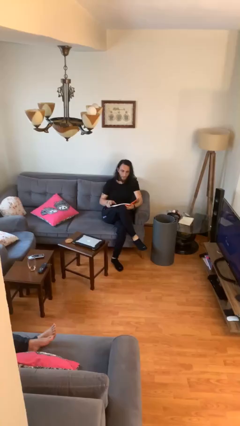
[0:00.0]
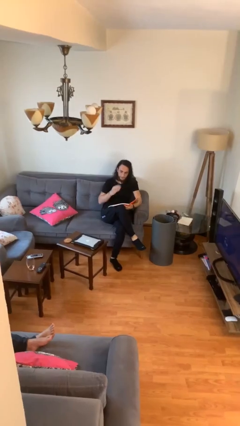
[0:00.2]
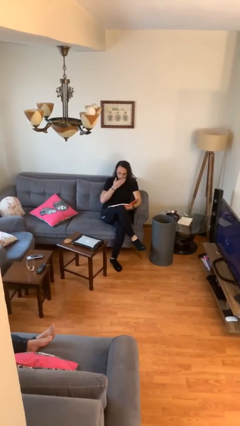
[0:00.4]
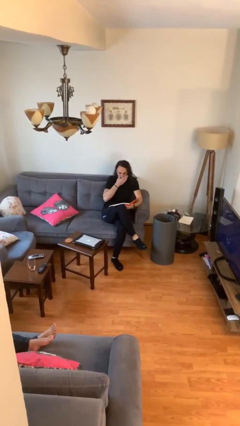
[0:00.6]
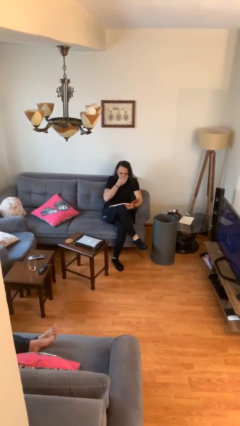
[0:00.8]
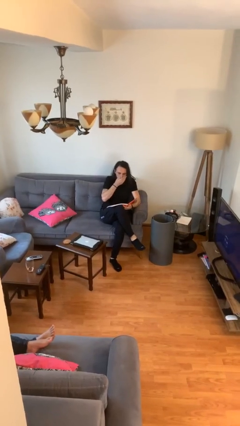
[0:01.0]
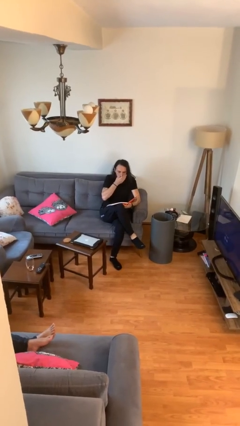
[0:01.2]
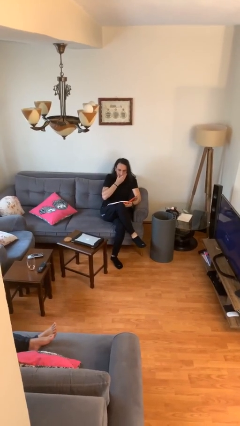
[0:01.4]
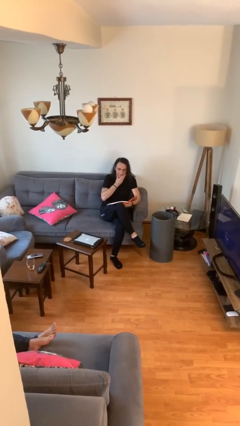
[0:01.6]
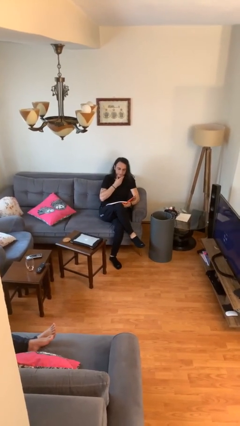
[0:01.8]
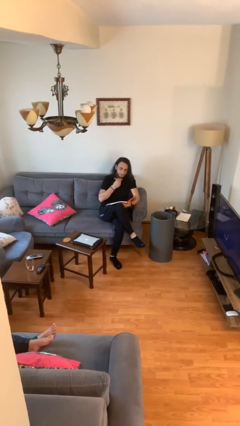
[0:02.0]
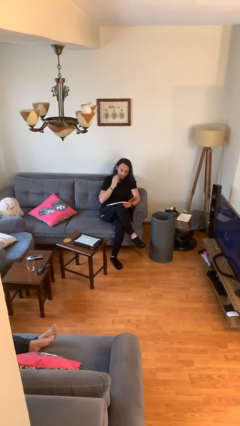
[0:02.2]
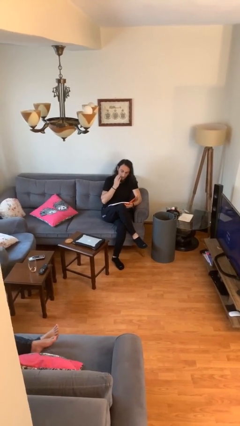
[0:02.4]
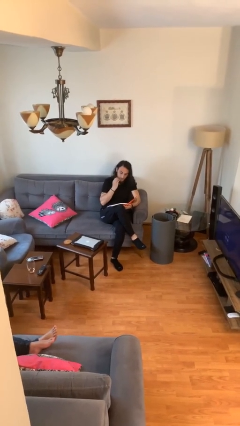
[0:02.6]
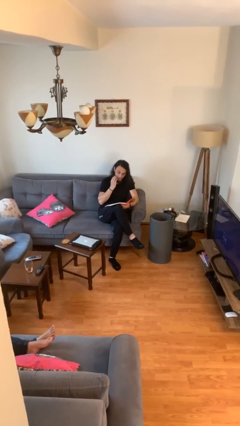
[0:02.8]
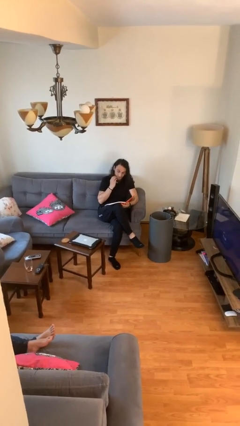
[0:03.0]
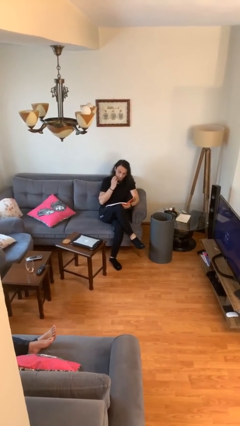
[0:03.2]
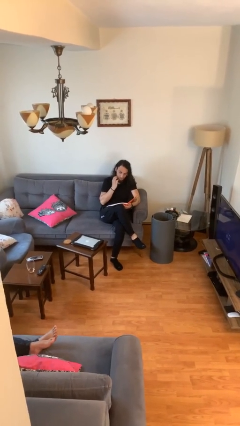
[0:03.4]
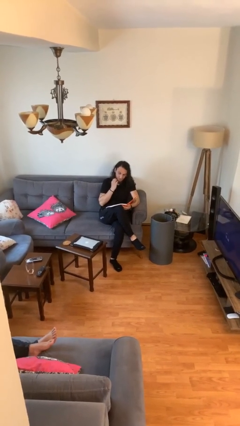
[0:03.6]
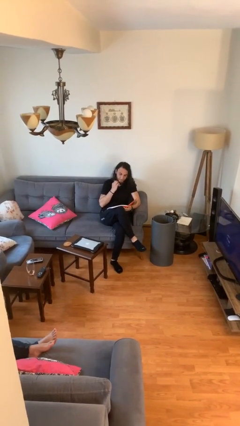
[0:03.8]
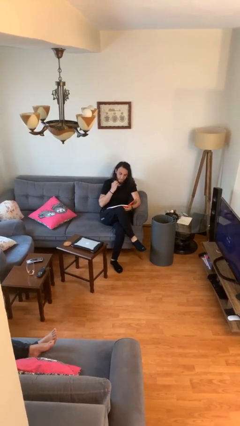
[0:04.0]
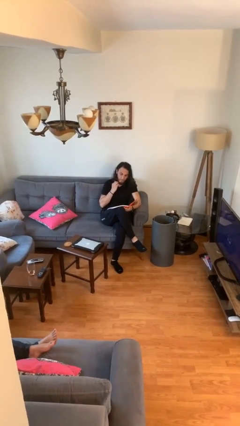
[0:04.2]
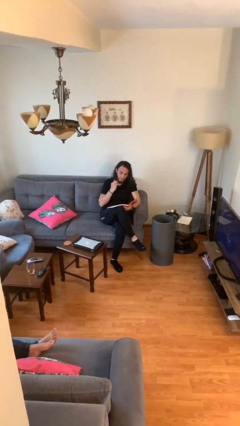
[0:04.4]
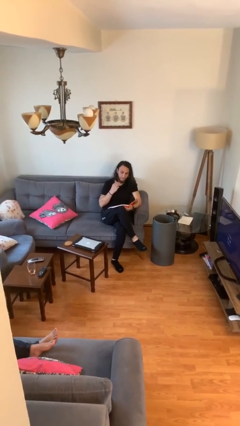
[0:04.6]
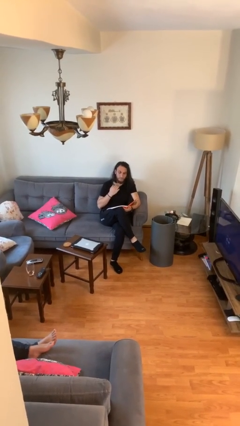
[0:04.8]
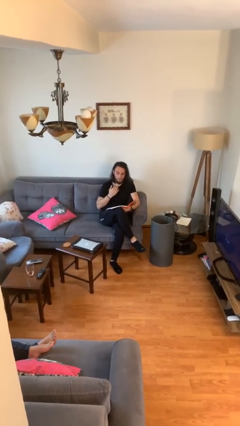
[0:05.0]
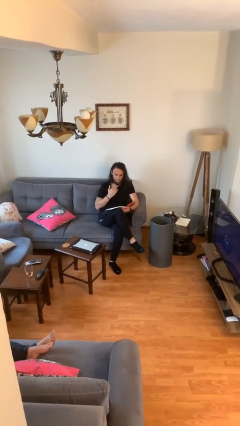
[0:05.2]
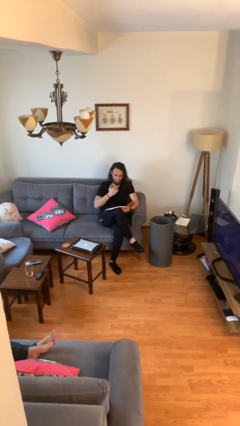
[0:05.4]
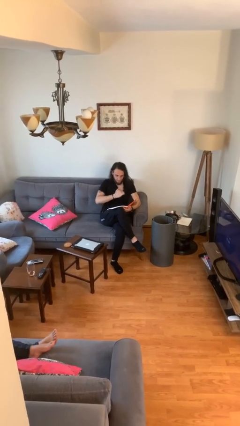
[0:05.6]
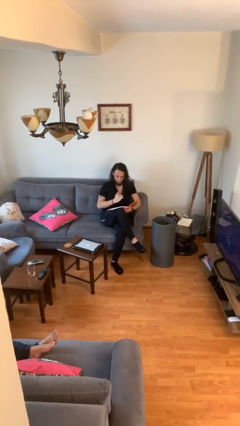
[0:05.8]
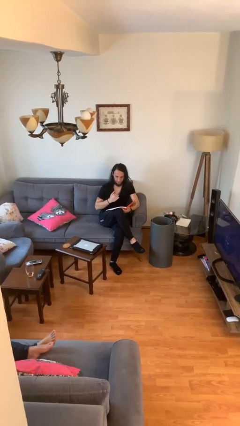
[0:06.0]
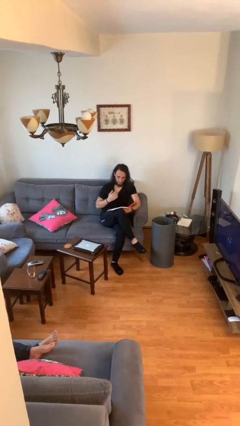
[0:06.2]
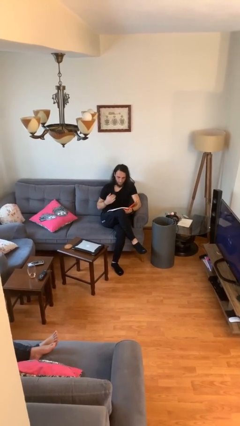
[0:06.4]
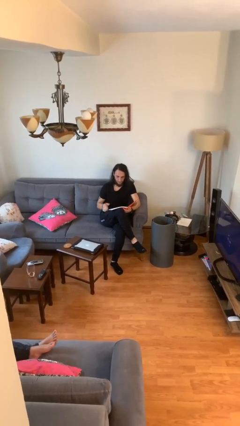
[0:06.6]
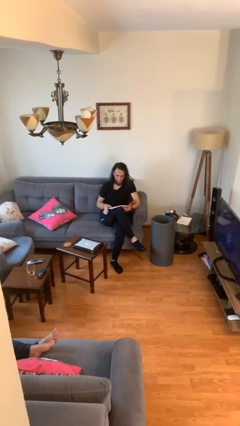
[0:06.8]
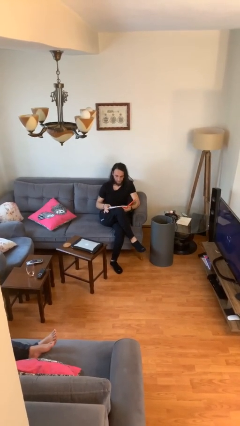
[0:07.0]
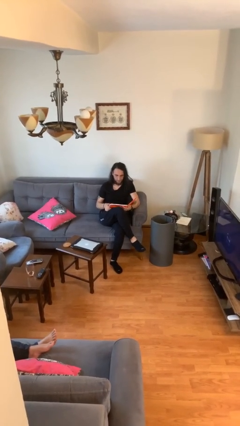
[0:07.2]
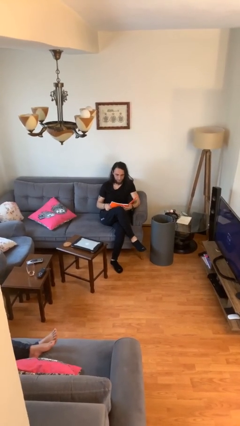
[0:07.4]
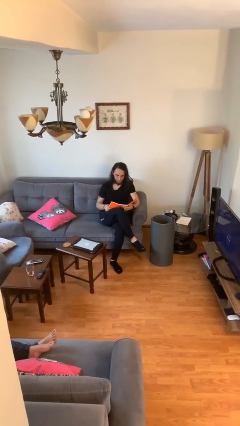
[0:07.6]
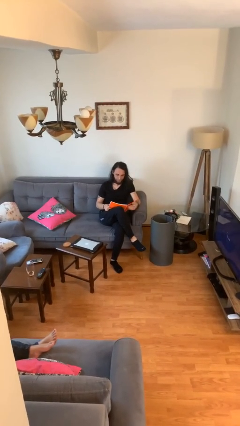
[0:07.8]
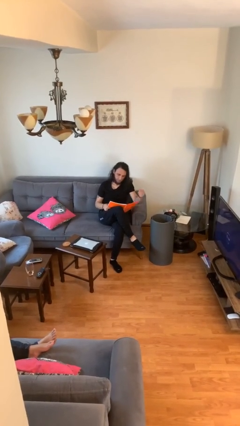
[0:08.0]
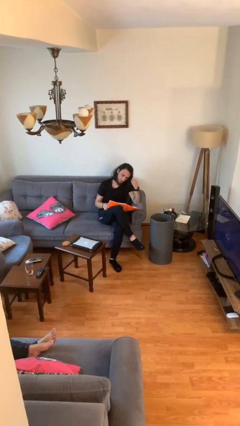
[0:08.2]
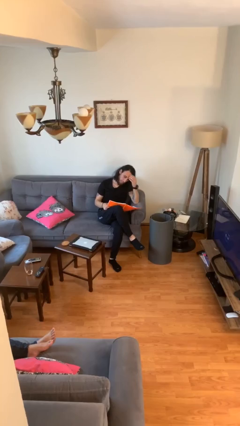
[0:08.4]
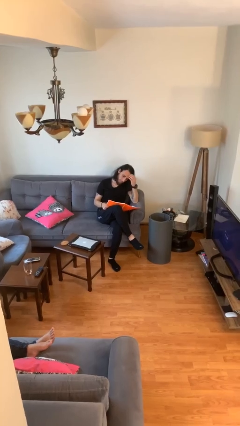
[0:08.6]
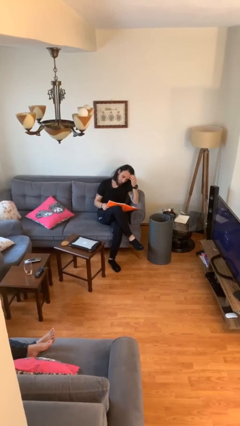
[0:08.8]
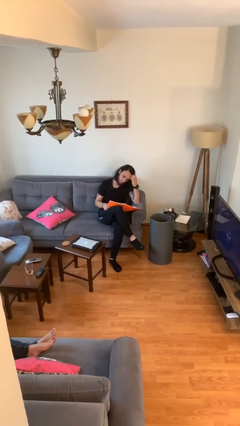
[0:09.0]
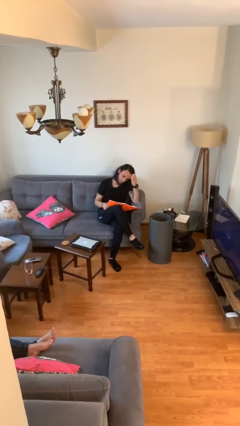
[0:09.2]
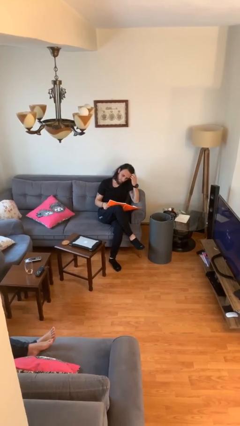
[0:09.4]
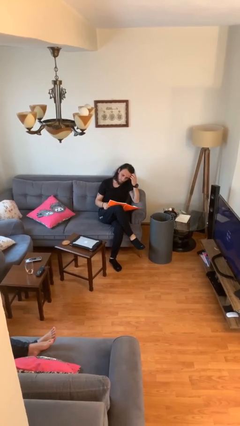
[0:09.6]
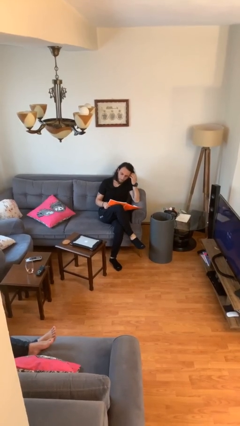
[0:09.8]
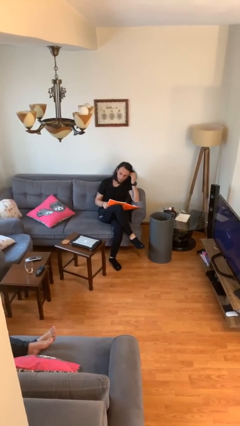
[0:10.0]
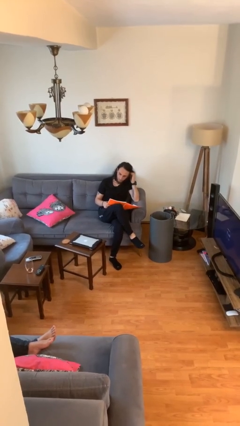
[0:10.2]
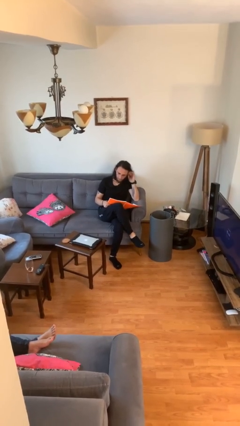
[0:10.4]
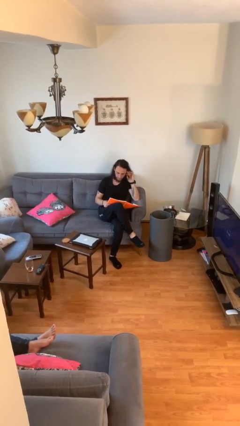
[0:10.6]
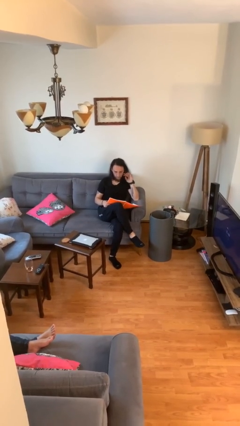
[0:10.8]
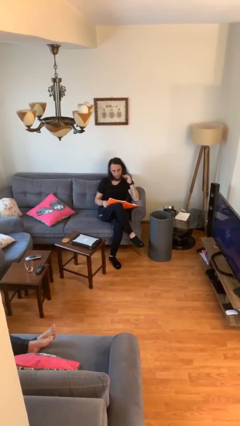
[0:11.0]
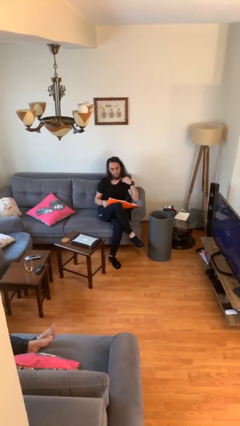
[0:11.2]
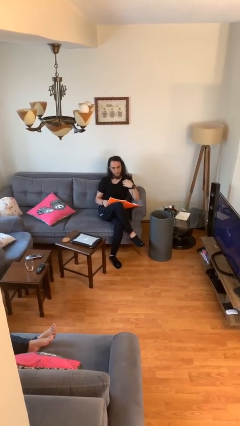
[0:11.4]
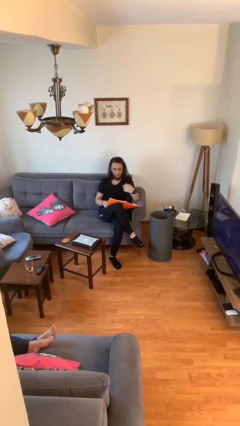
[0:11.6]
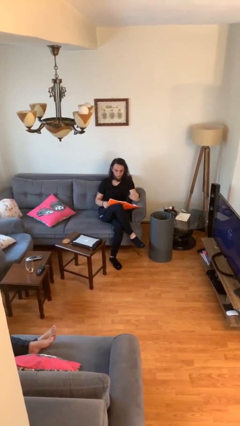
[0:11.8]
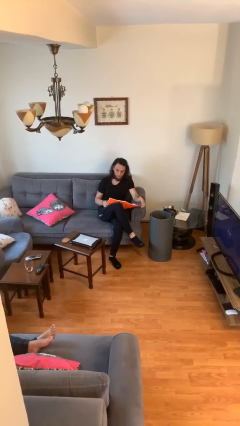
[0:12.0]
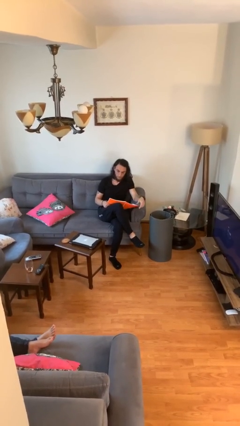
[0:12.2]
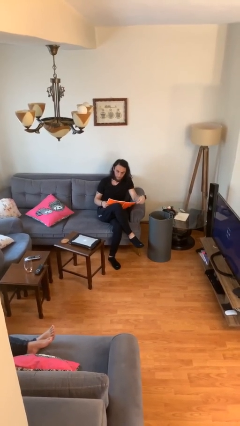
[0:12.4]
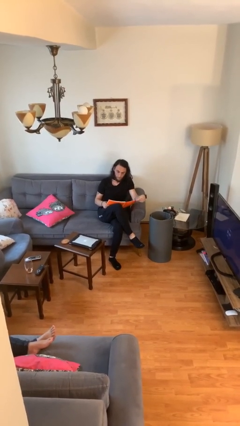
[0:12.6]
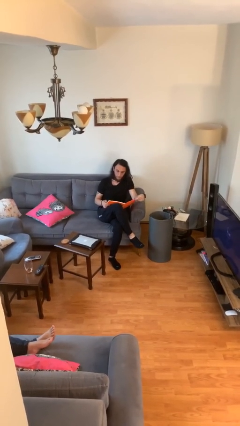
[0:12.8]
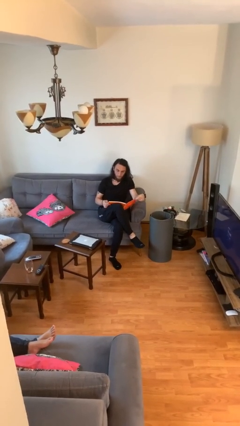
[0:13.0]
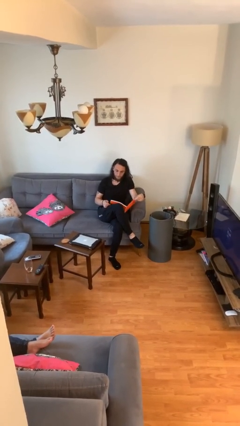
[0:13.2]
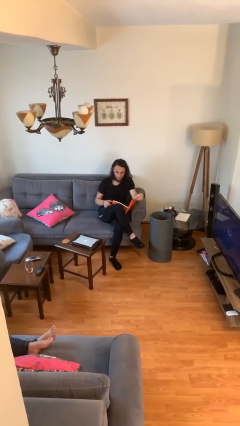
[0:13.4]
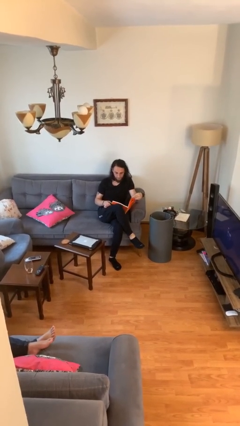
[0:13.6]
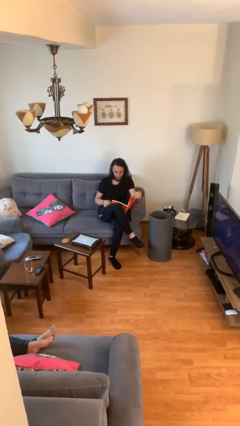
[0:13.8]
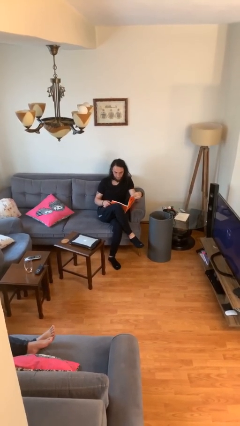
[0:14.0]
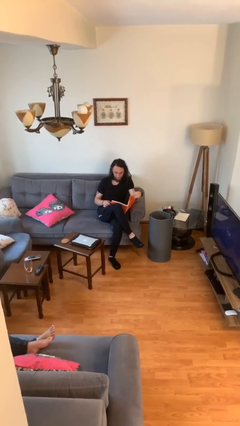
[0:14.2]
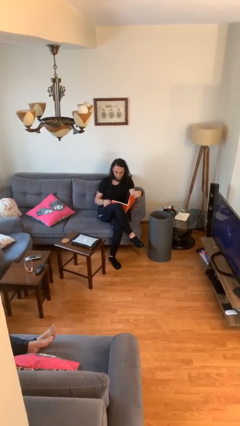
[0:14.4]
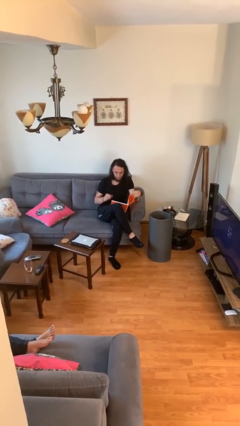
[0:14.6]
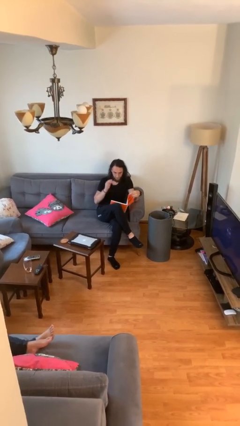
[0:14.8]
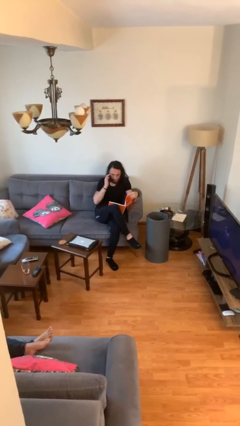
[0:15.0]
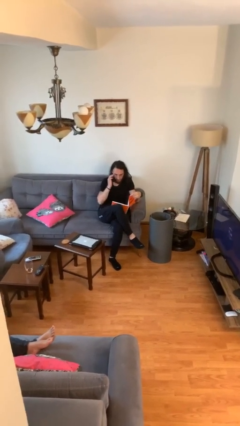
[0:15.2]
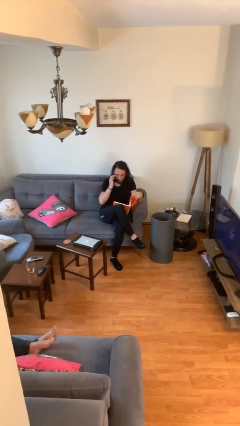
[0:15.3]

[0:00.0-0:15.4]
person reads document

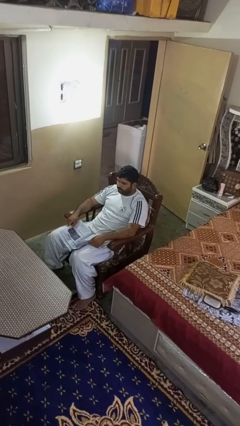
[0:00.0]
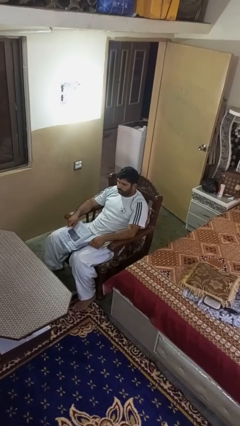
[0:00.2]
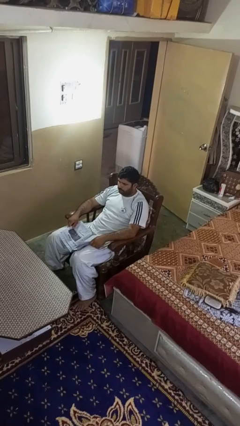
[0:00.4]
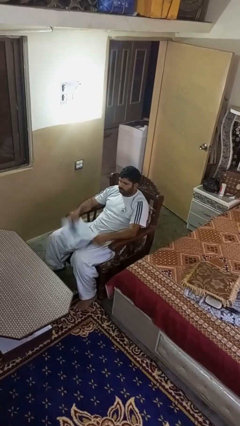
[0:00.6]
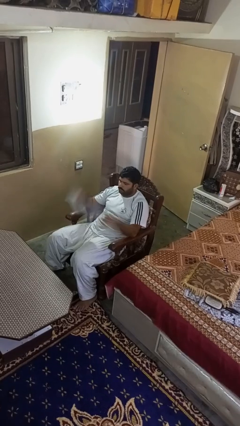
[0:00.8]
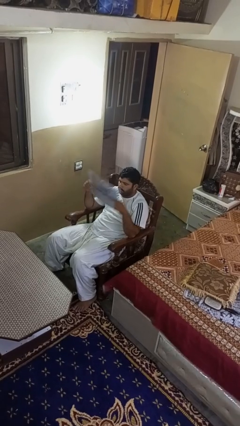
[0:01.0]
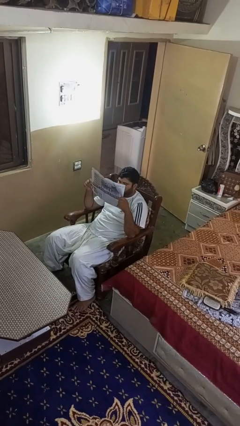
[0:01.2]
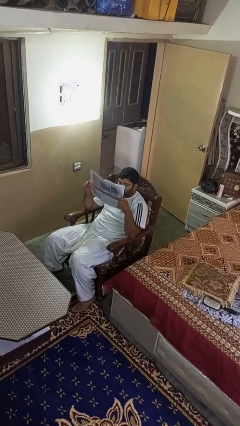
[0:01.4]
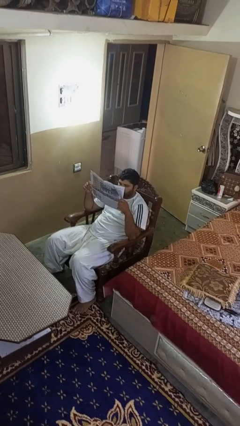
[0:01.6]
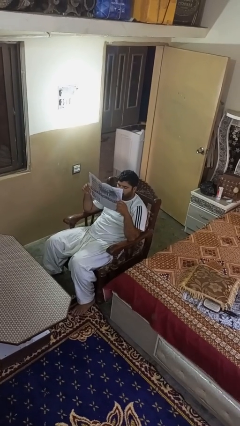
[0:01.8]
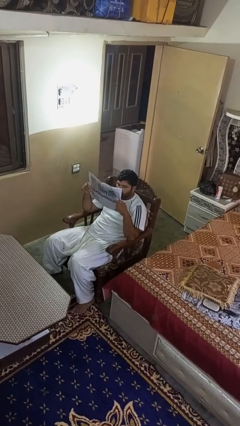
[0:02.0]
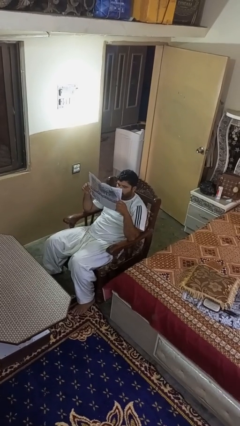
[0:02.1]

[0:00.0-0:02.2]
person reads newspaper

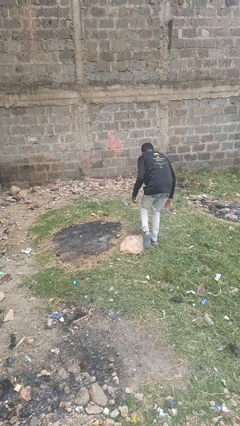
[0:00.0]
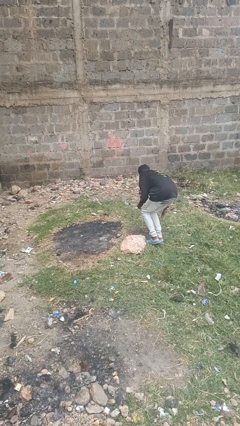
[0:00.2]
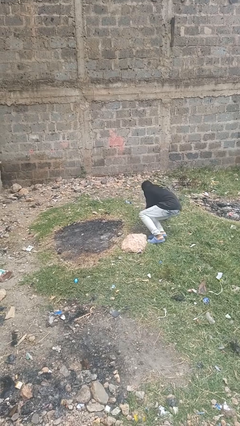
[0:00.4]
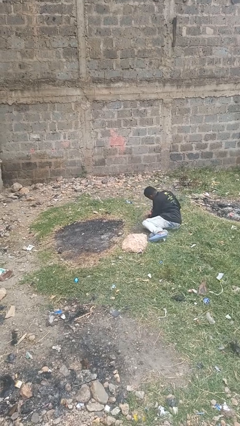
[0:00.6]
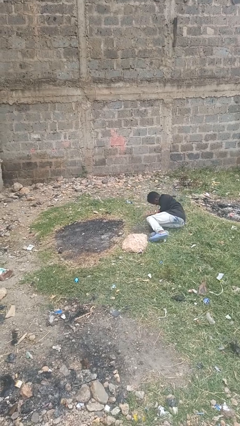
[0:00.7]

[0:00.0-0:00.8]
person trips on object on floor
